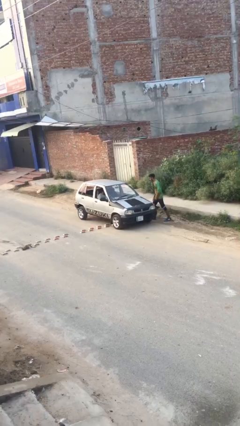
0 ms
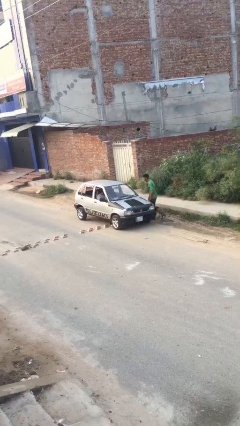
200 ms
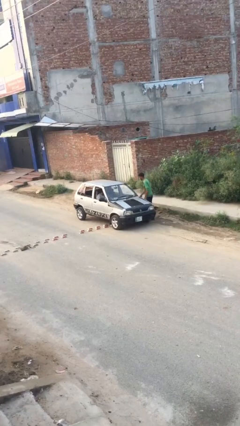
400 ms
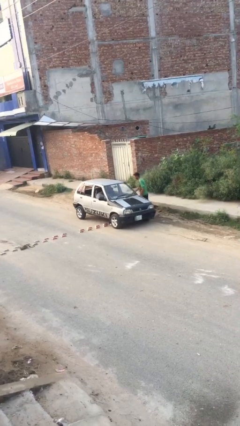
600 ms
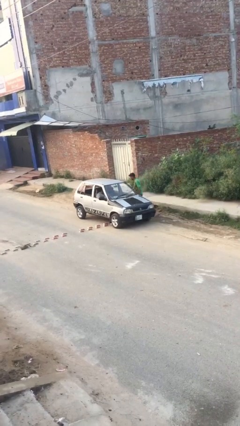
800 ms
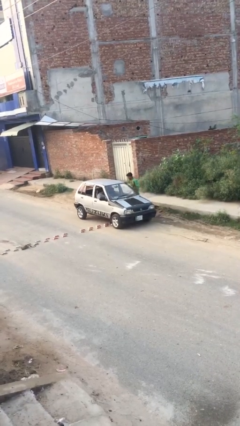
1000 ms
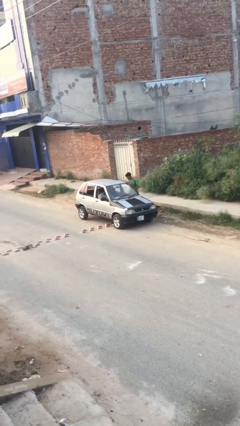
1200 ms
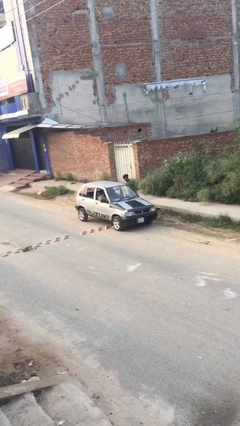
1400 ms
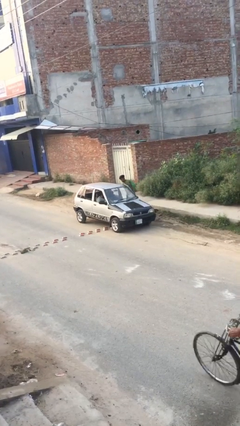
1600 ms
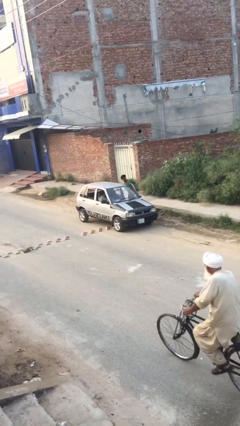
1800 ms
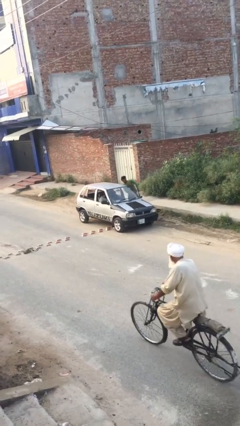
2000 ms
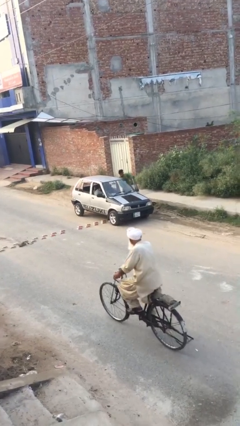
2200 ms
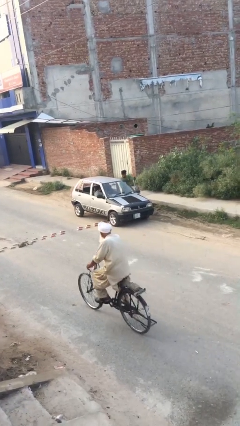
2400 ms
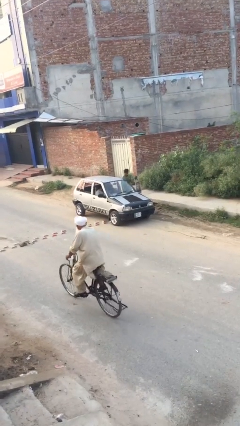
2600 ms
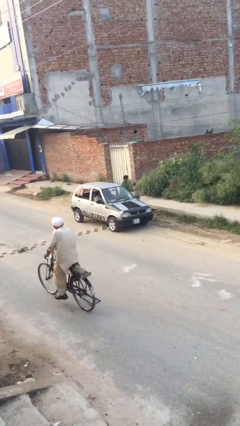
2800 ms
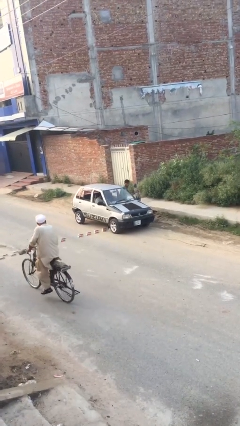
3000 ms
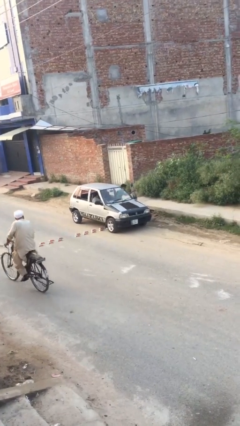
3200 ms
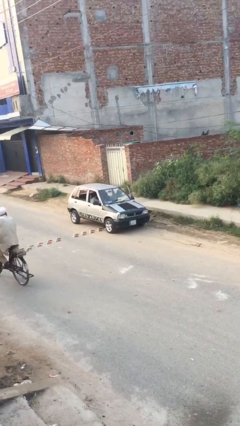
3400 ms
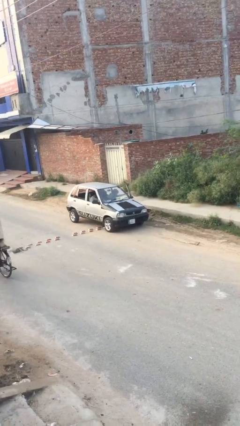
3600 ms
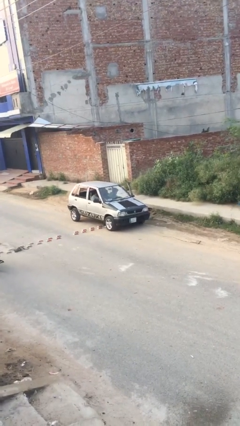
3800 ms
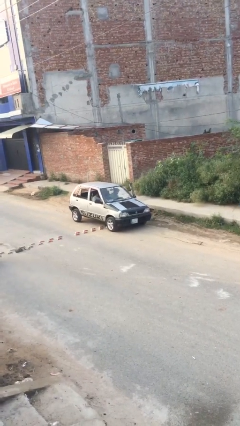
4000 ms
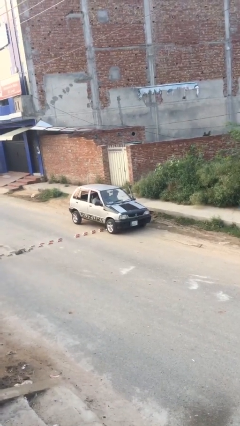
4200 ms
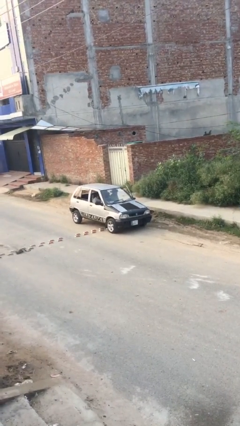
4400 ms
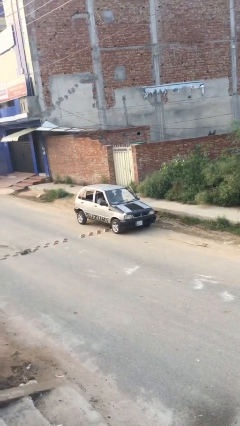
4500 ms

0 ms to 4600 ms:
car picks up person

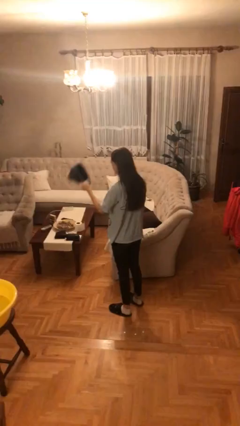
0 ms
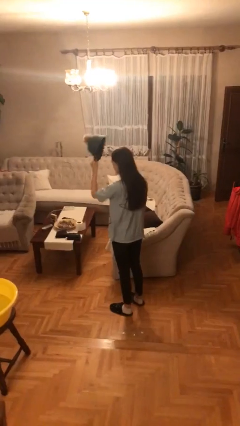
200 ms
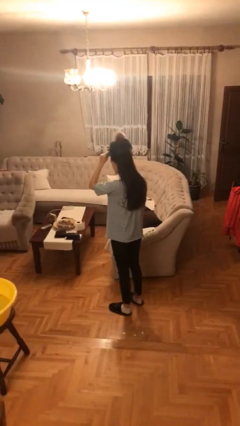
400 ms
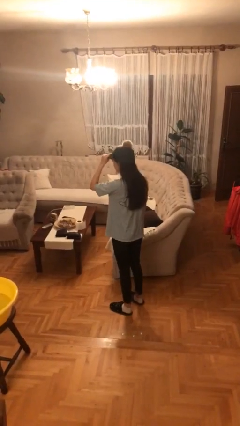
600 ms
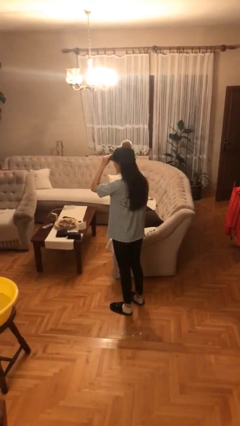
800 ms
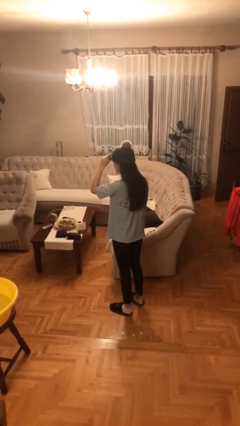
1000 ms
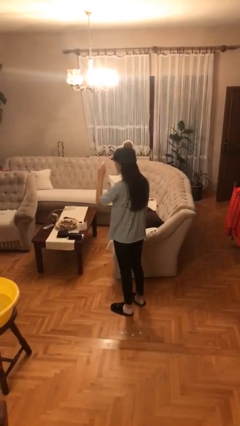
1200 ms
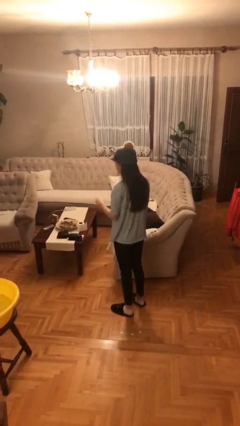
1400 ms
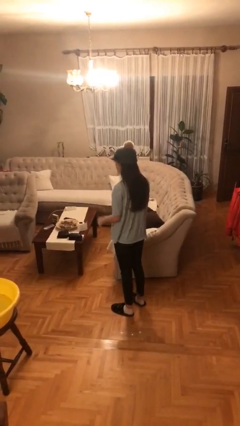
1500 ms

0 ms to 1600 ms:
person puts on hat

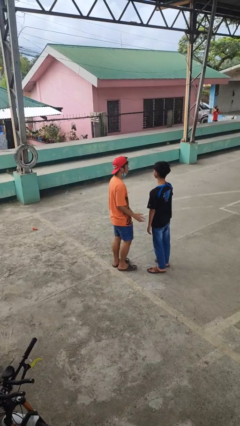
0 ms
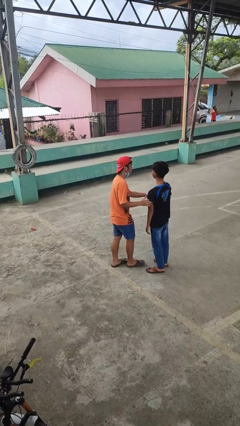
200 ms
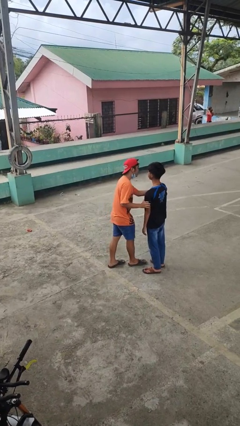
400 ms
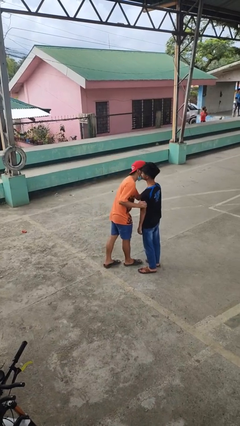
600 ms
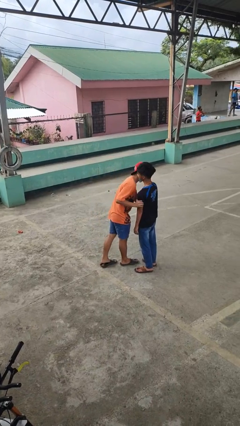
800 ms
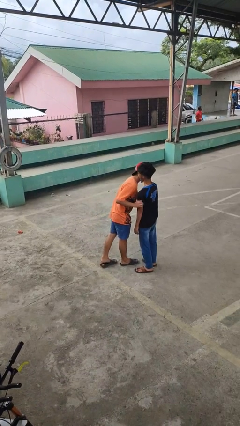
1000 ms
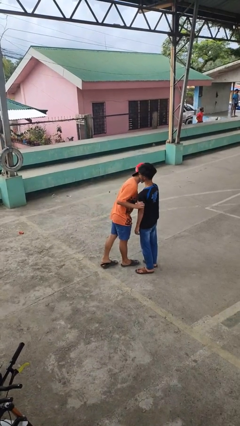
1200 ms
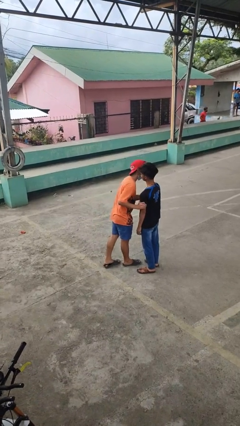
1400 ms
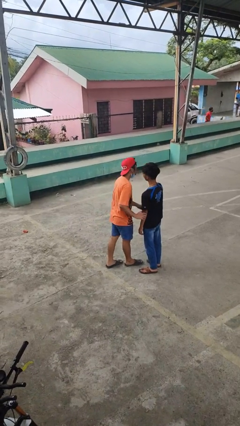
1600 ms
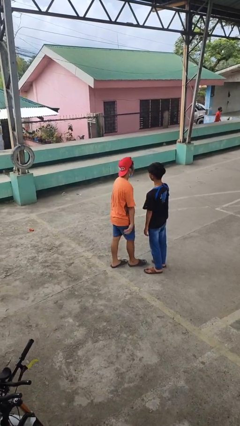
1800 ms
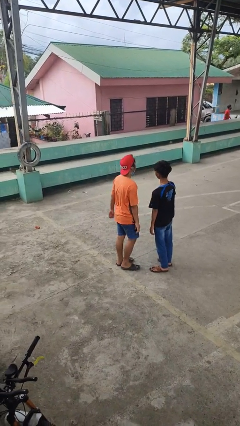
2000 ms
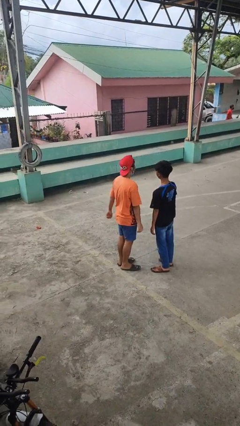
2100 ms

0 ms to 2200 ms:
person kisses cheek of person

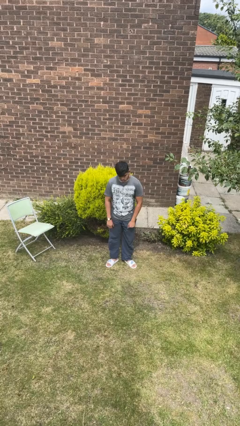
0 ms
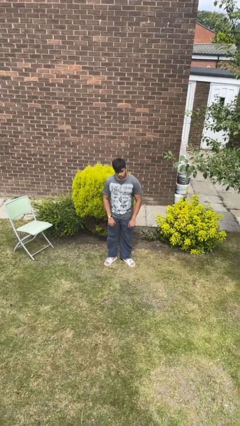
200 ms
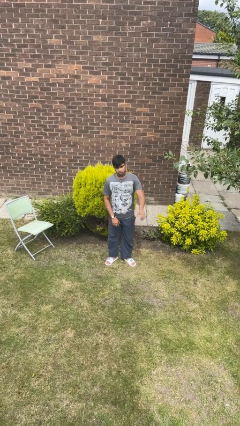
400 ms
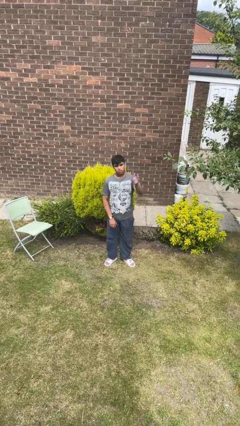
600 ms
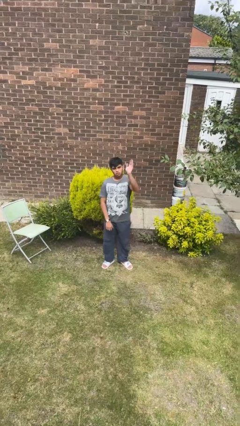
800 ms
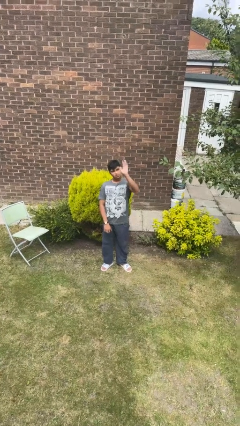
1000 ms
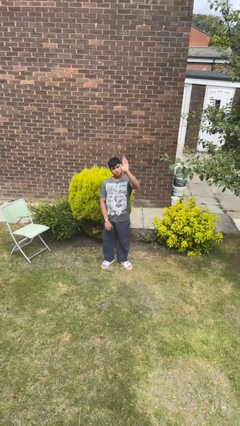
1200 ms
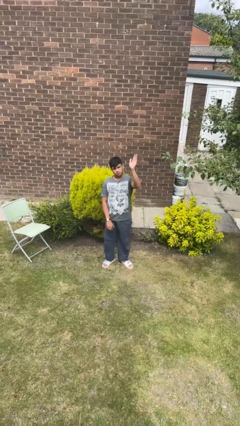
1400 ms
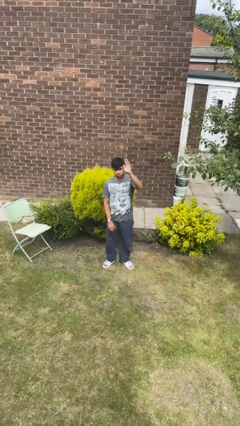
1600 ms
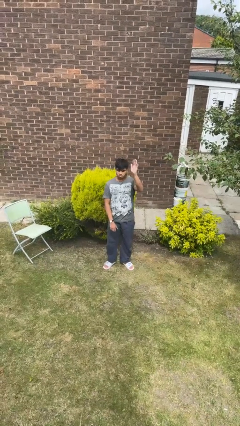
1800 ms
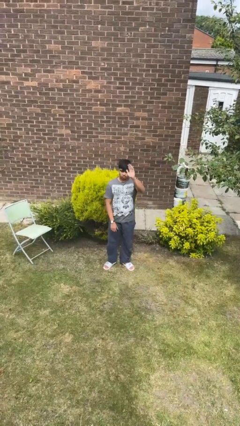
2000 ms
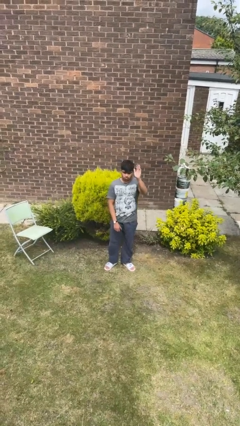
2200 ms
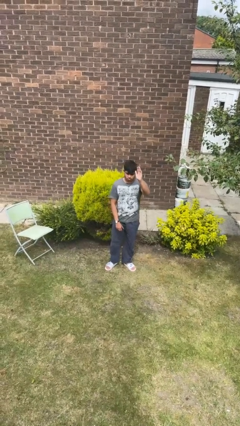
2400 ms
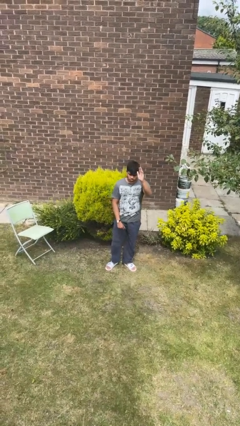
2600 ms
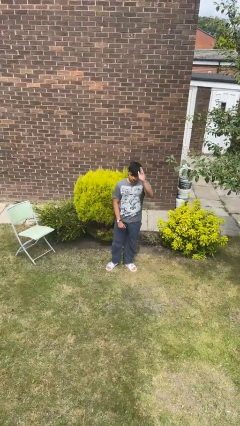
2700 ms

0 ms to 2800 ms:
person gestures raise hand

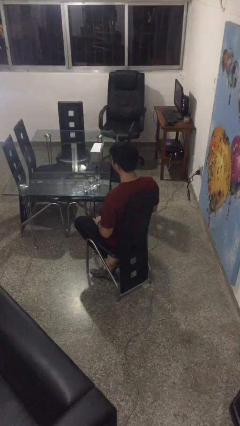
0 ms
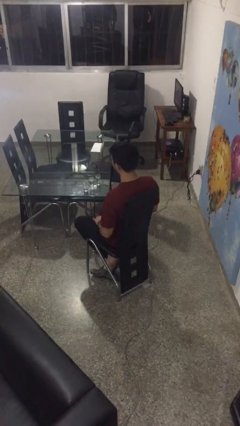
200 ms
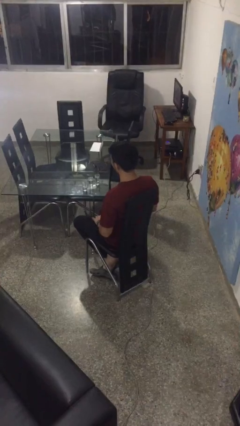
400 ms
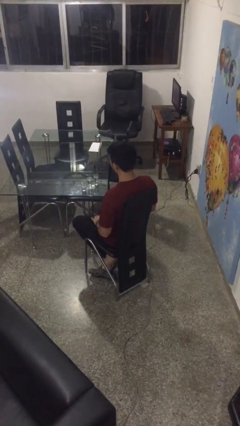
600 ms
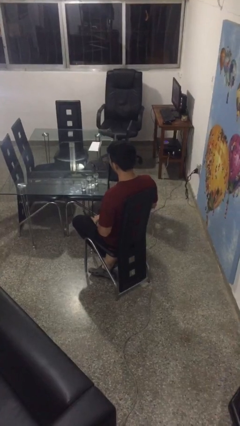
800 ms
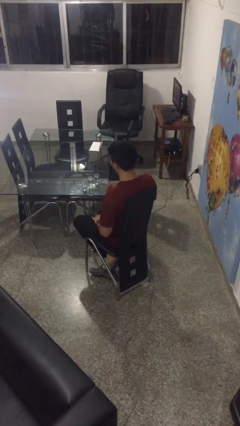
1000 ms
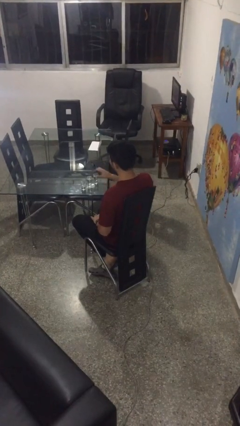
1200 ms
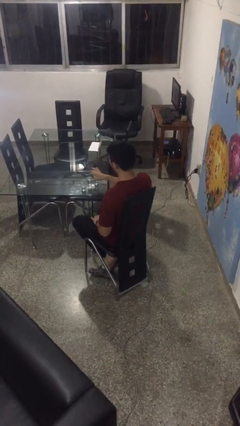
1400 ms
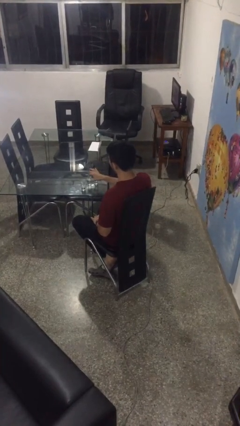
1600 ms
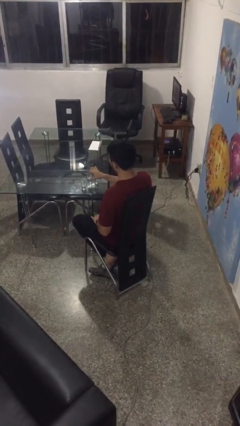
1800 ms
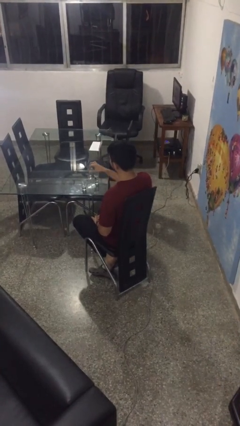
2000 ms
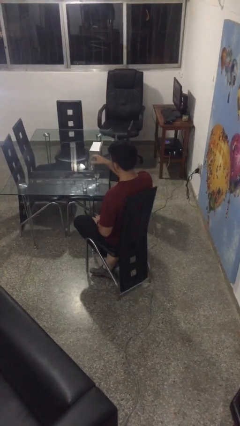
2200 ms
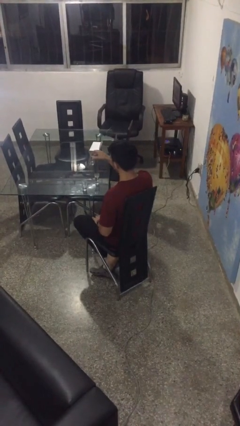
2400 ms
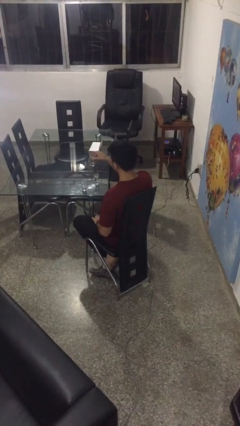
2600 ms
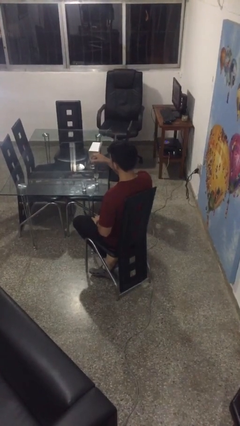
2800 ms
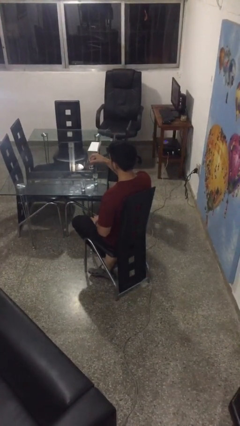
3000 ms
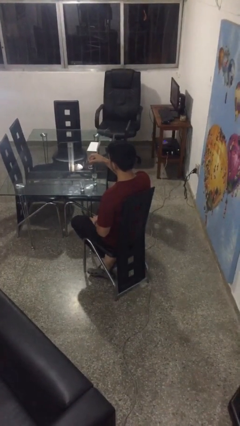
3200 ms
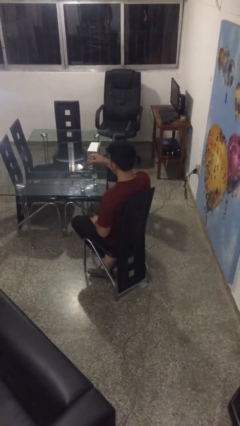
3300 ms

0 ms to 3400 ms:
person picks up object from table

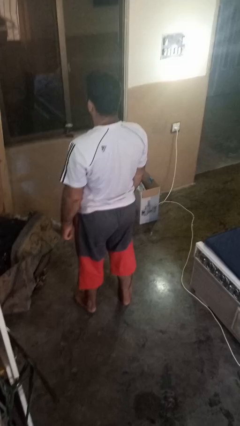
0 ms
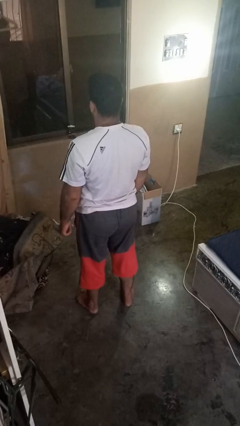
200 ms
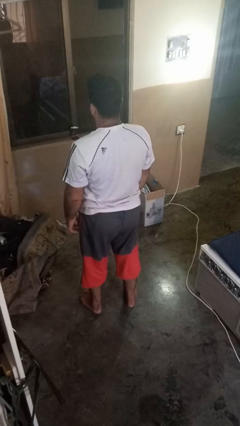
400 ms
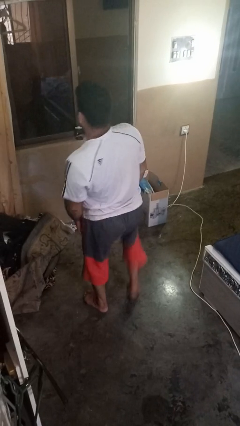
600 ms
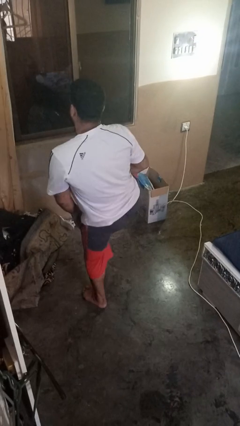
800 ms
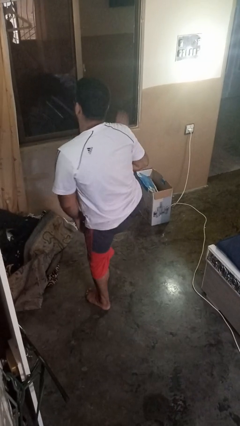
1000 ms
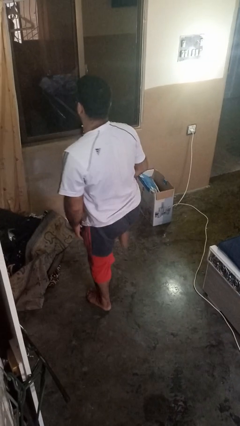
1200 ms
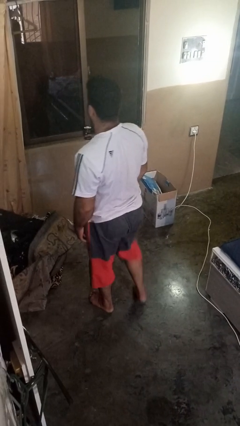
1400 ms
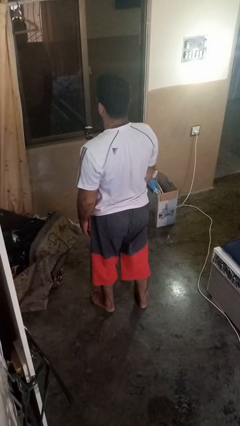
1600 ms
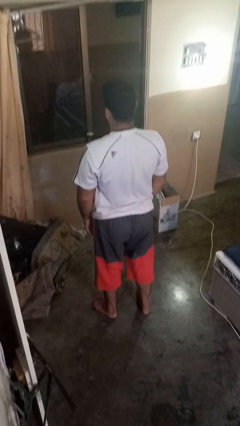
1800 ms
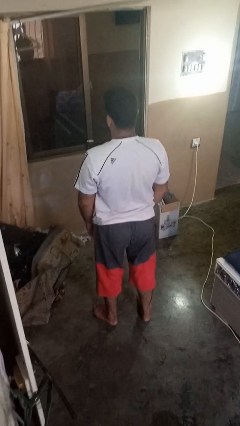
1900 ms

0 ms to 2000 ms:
person karate kicks

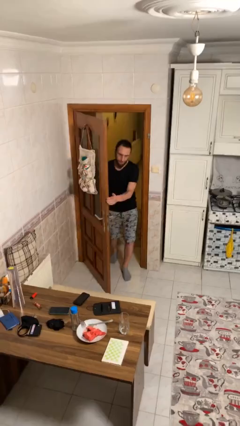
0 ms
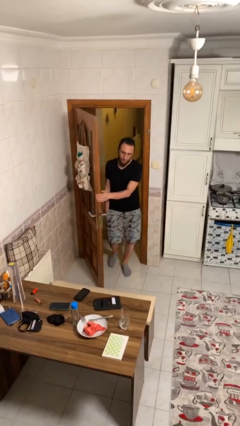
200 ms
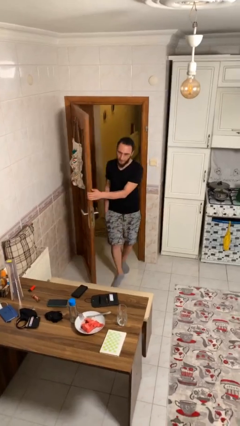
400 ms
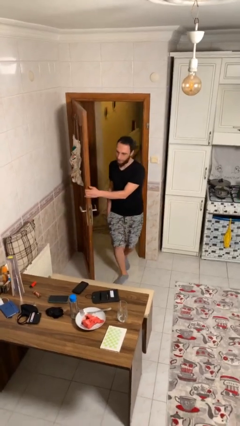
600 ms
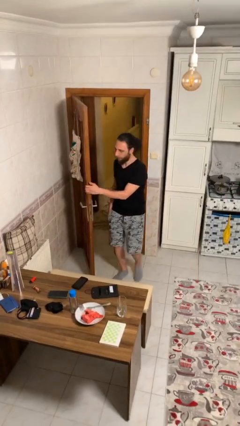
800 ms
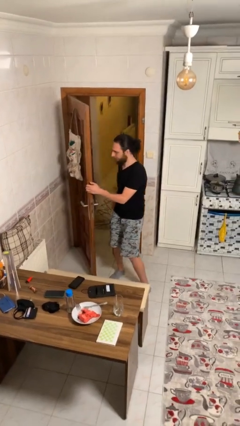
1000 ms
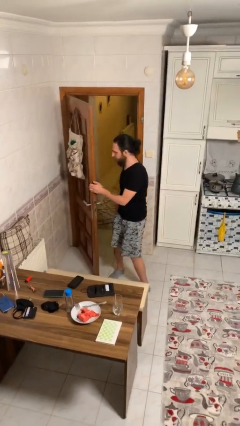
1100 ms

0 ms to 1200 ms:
person enters scene through structure
